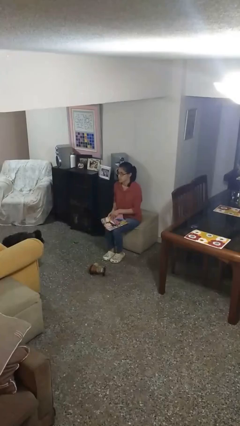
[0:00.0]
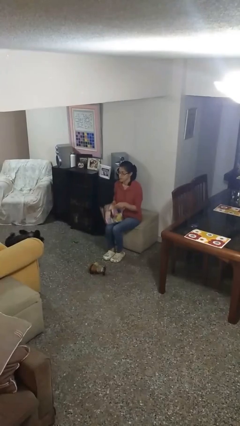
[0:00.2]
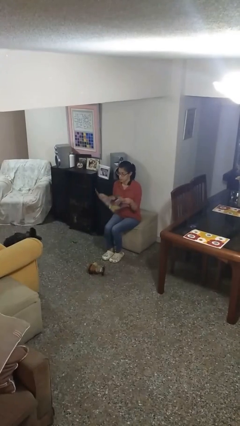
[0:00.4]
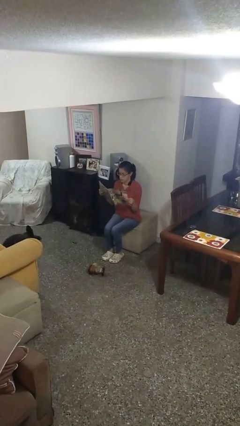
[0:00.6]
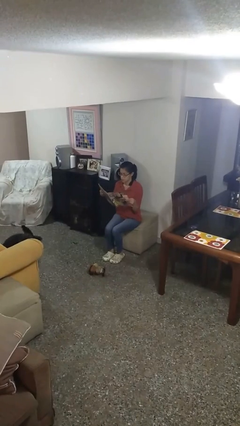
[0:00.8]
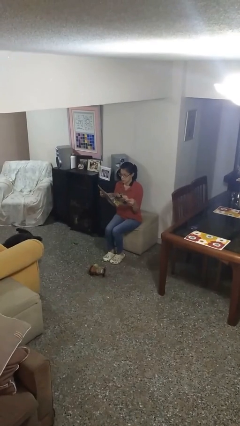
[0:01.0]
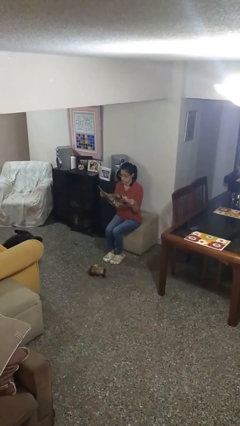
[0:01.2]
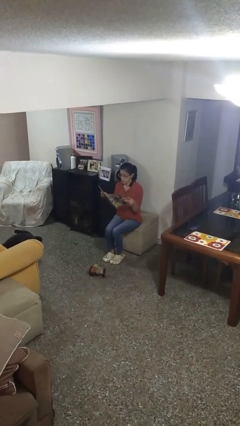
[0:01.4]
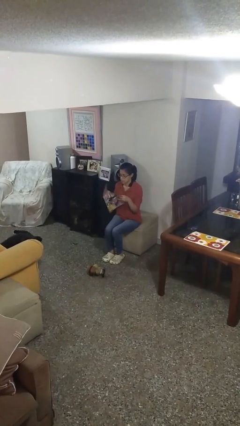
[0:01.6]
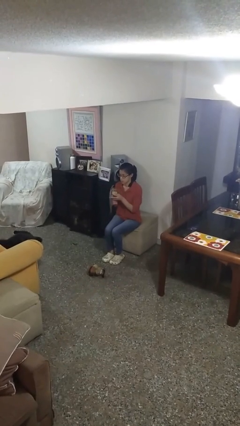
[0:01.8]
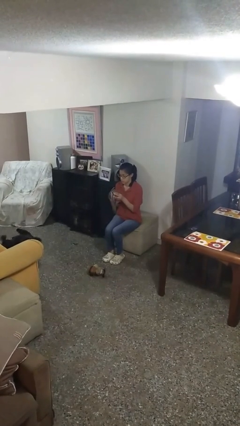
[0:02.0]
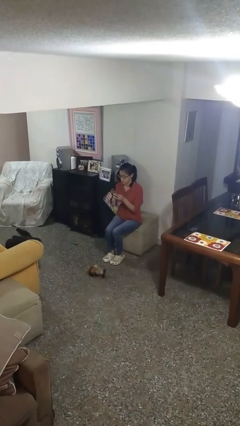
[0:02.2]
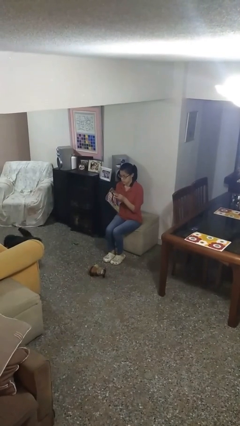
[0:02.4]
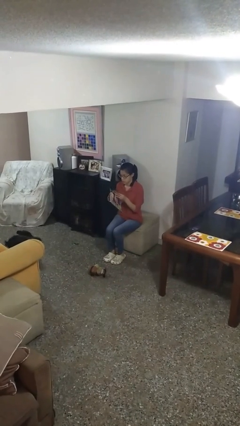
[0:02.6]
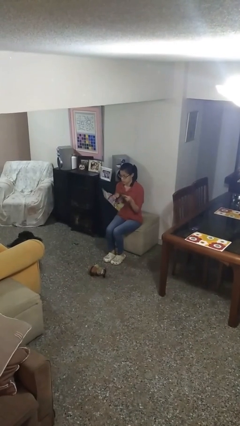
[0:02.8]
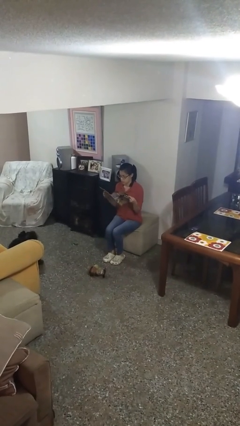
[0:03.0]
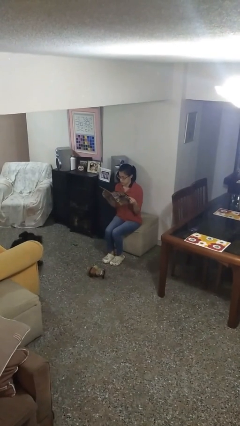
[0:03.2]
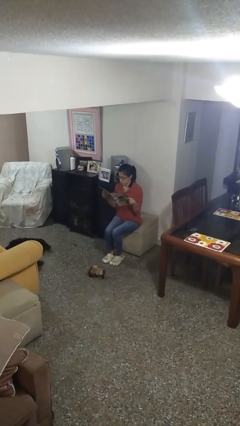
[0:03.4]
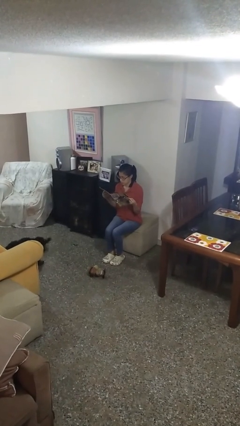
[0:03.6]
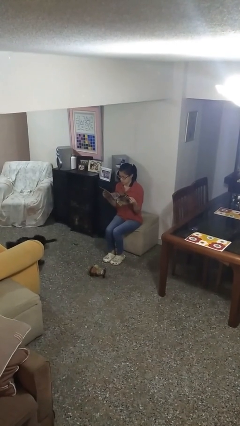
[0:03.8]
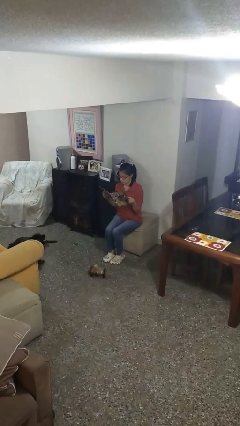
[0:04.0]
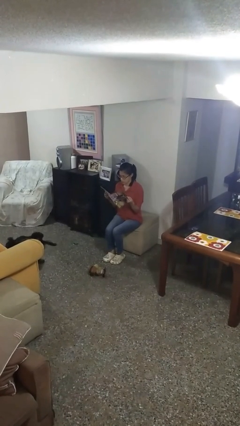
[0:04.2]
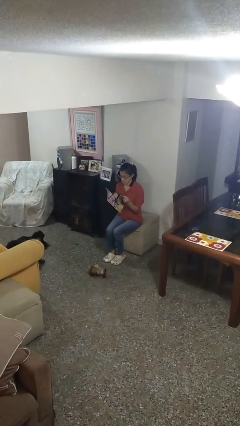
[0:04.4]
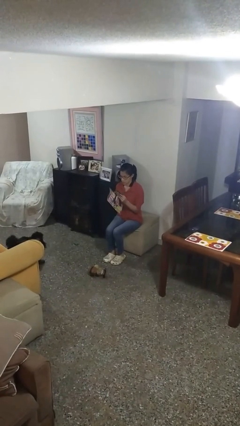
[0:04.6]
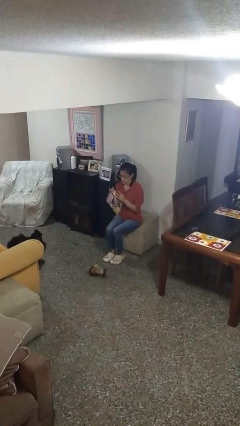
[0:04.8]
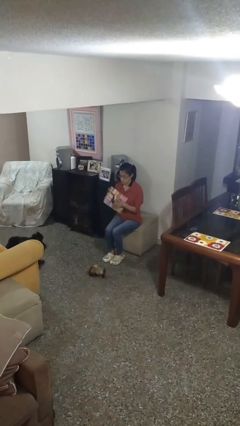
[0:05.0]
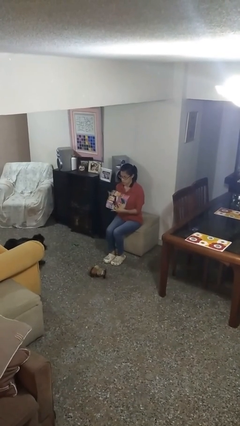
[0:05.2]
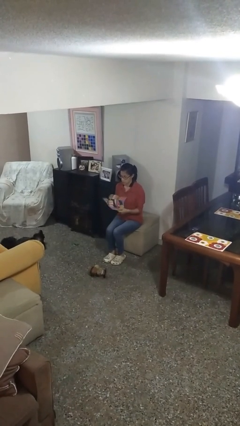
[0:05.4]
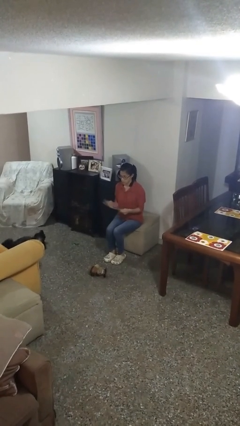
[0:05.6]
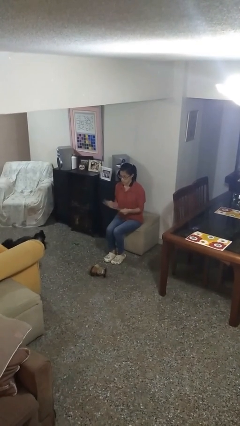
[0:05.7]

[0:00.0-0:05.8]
person reads magazine

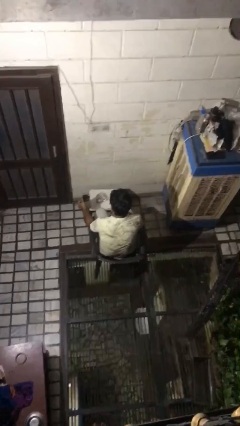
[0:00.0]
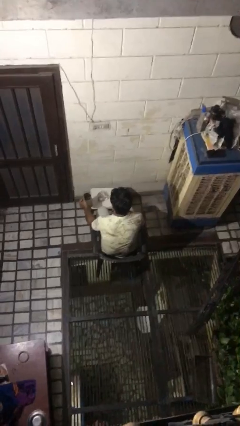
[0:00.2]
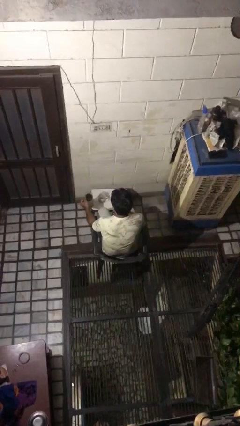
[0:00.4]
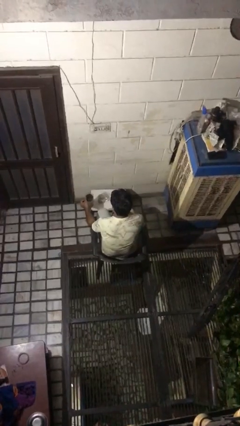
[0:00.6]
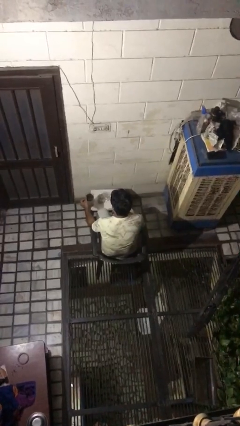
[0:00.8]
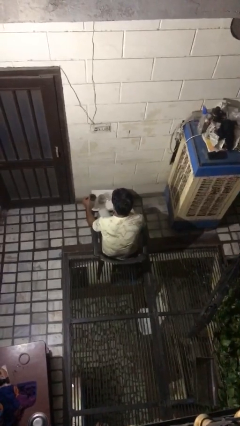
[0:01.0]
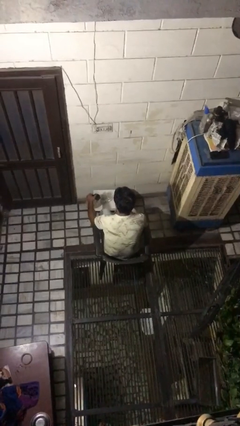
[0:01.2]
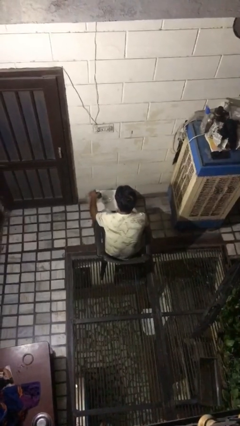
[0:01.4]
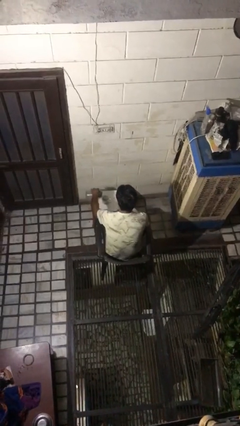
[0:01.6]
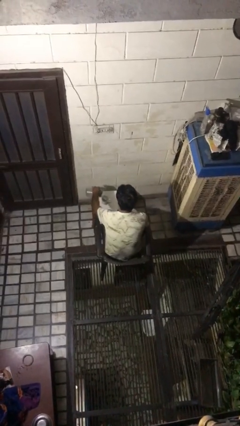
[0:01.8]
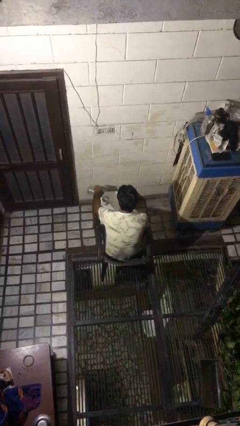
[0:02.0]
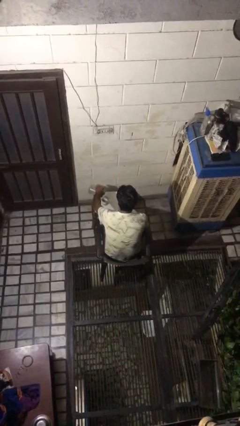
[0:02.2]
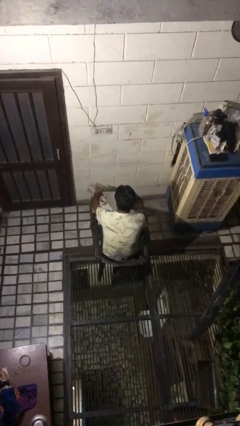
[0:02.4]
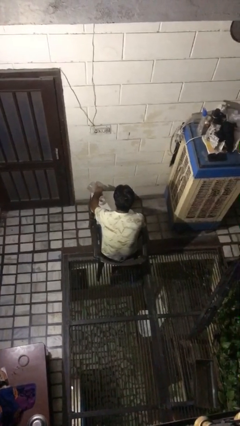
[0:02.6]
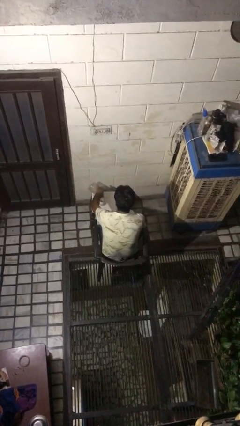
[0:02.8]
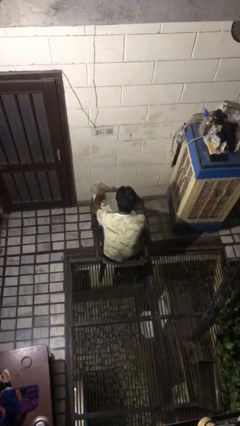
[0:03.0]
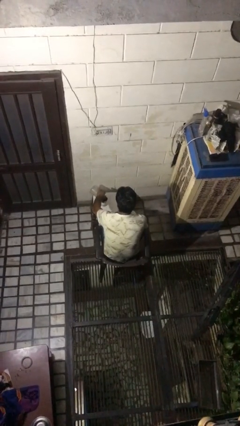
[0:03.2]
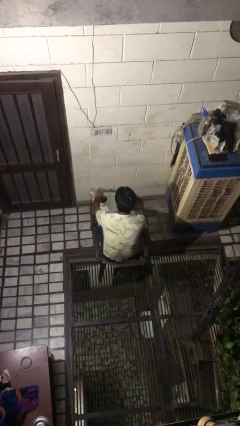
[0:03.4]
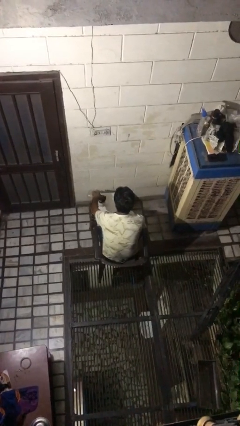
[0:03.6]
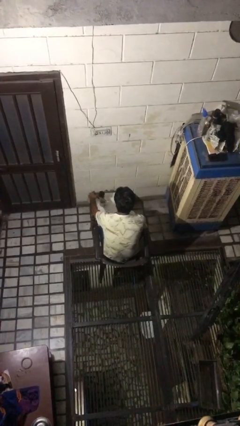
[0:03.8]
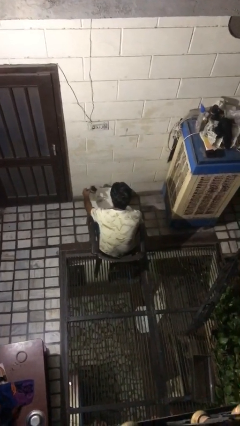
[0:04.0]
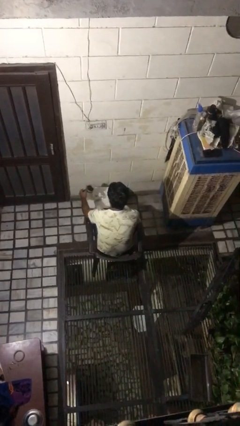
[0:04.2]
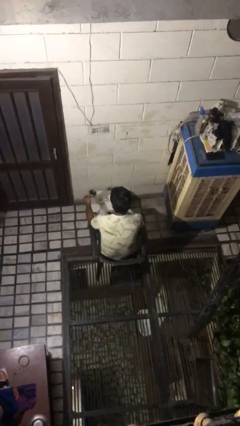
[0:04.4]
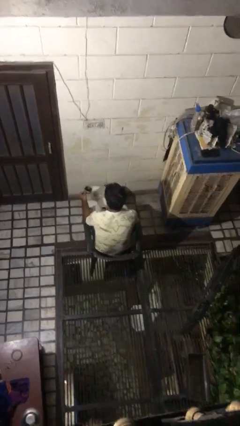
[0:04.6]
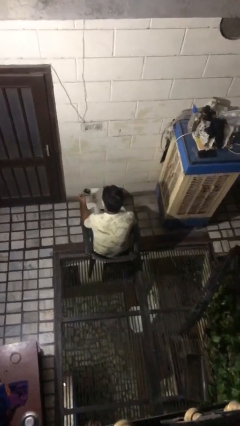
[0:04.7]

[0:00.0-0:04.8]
person pours coffee into mug

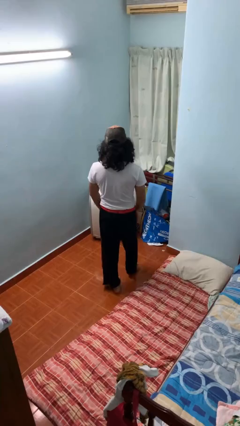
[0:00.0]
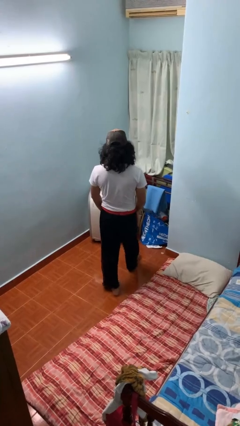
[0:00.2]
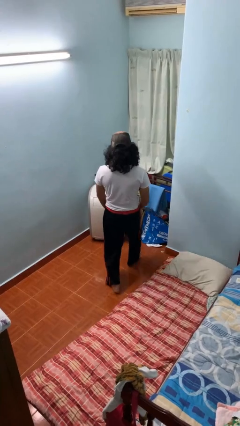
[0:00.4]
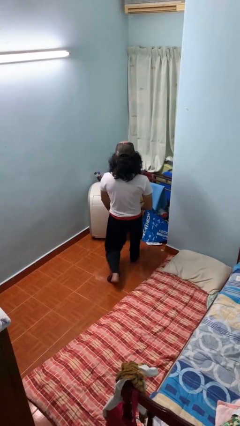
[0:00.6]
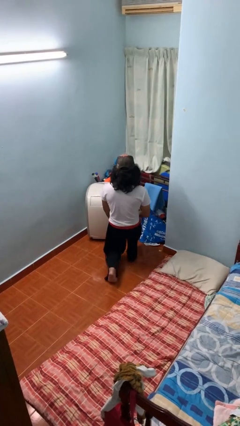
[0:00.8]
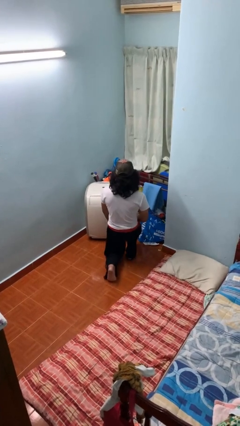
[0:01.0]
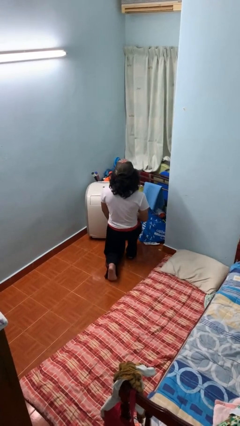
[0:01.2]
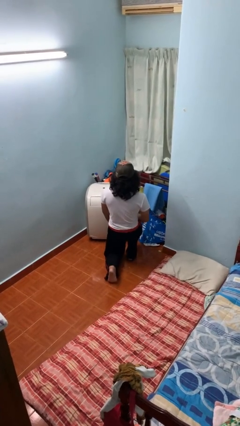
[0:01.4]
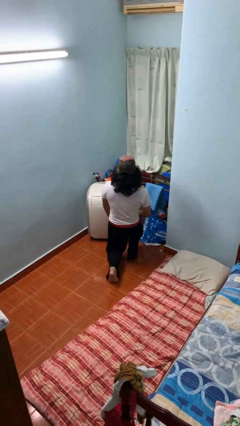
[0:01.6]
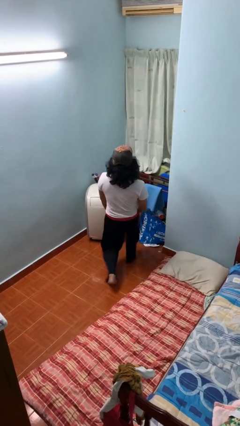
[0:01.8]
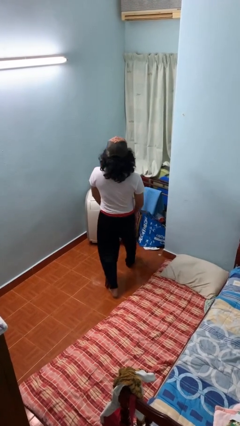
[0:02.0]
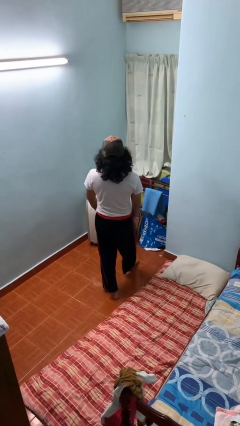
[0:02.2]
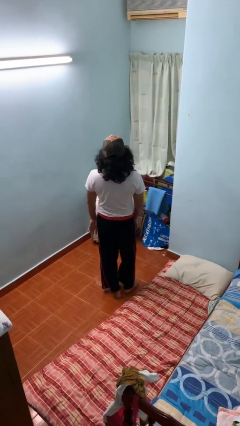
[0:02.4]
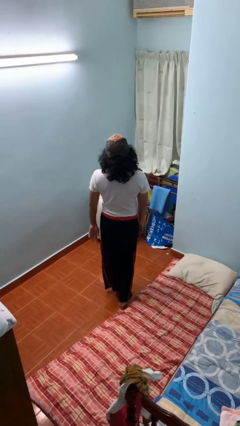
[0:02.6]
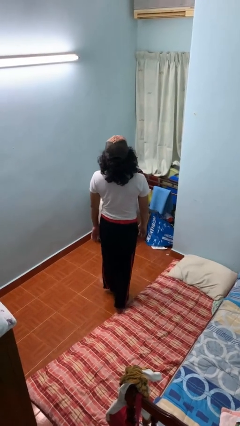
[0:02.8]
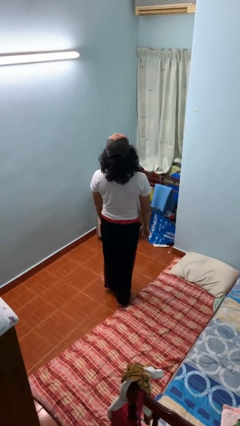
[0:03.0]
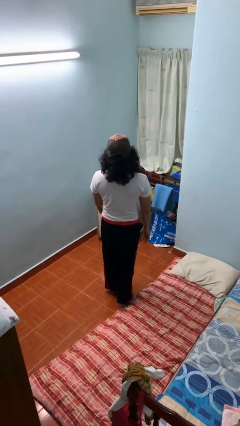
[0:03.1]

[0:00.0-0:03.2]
person exercises with lunges

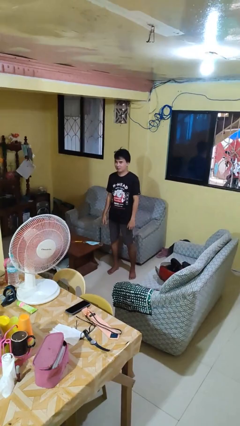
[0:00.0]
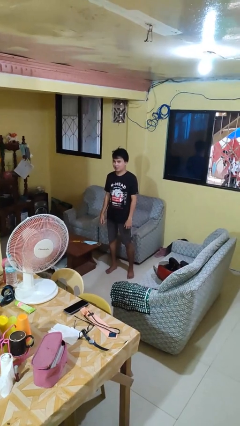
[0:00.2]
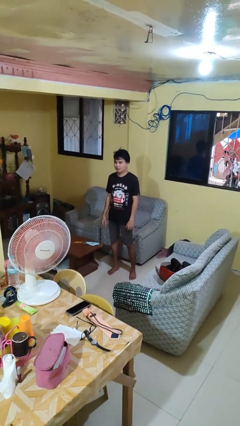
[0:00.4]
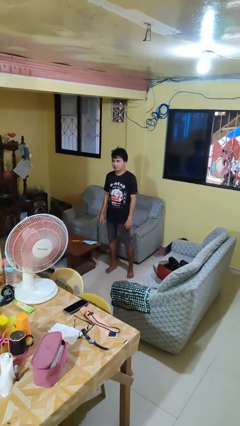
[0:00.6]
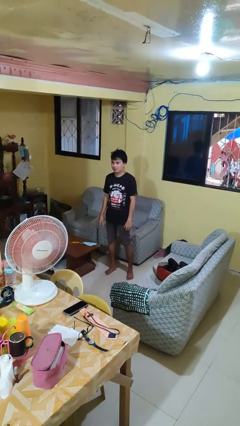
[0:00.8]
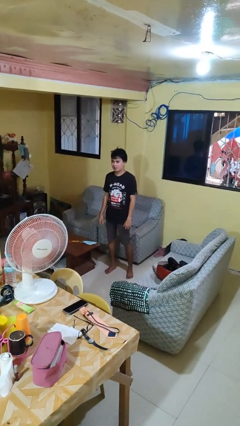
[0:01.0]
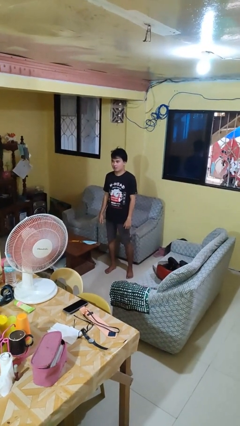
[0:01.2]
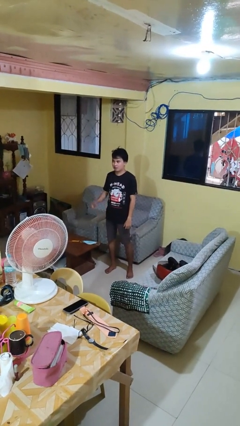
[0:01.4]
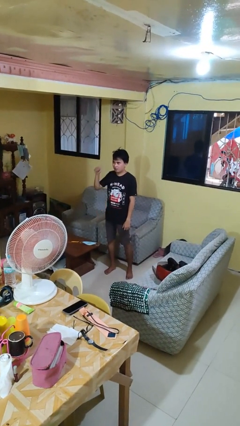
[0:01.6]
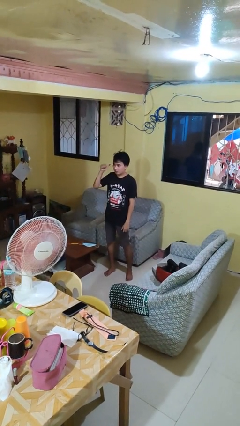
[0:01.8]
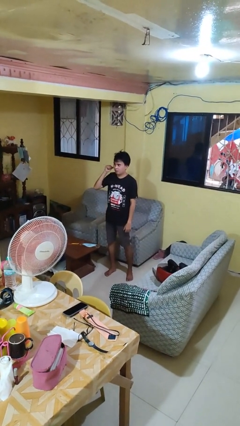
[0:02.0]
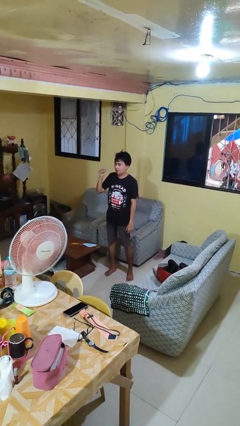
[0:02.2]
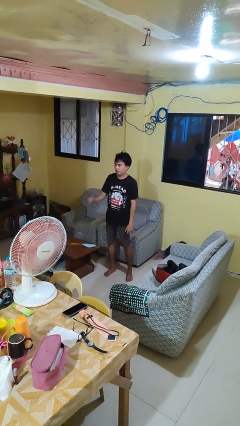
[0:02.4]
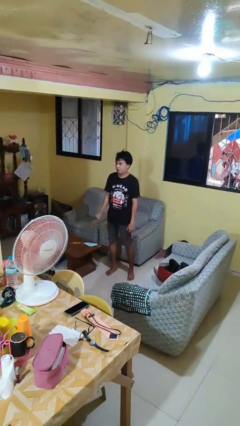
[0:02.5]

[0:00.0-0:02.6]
person gestures behind me

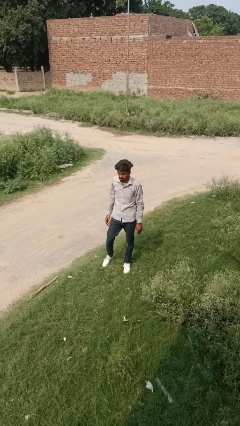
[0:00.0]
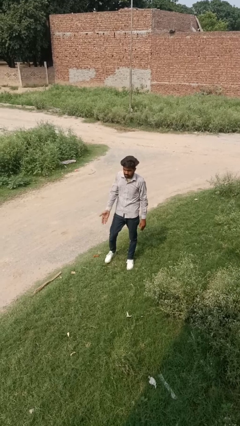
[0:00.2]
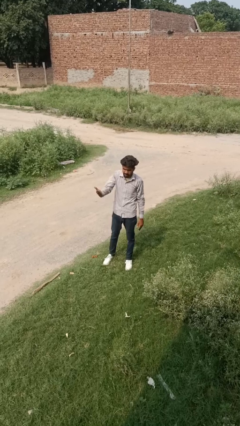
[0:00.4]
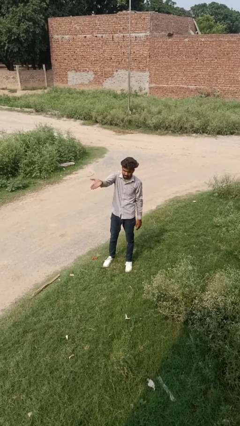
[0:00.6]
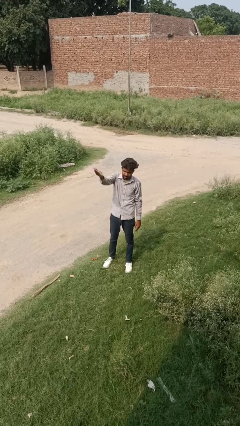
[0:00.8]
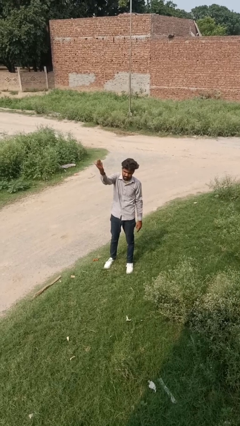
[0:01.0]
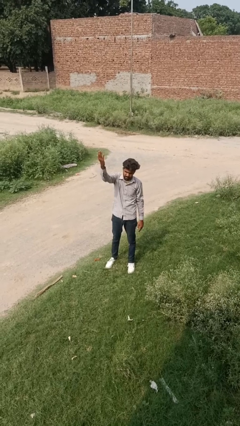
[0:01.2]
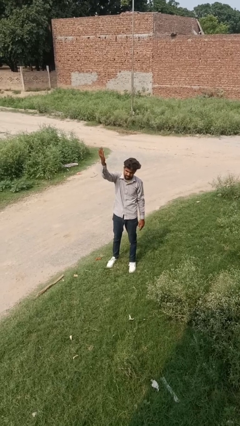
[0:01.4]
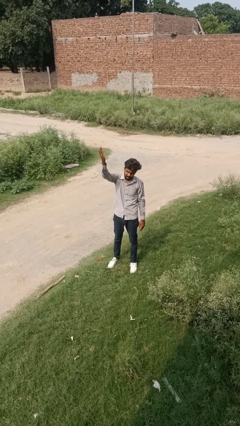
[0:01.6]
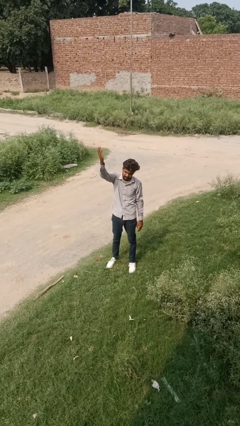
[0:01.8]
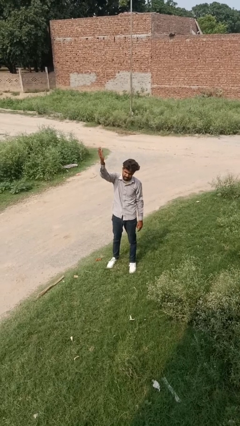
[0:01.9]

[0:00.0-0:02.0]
person gestures swipe up
